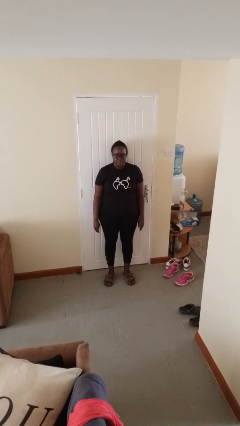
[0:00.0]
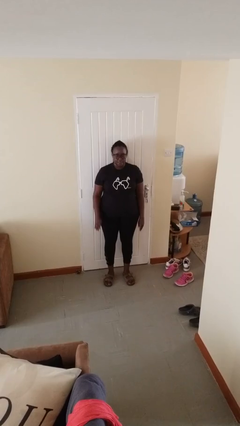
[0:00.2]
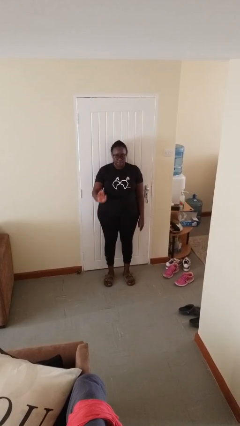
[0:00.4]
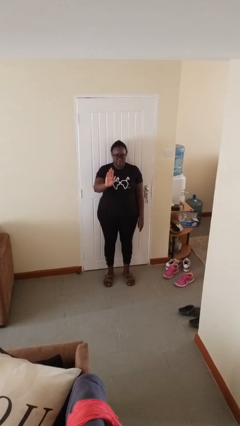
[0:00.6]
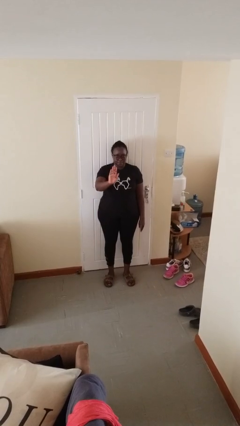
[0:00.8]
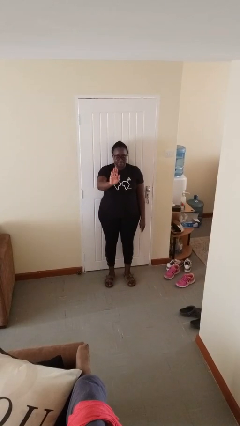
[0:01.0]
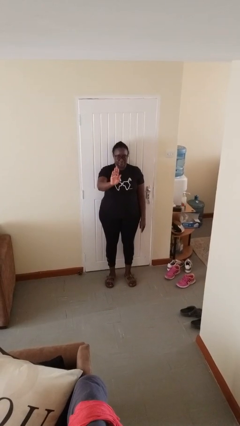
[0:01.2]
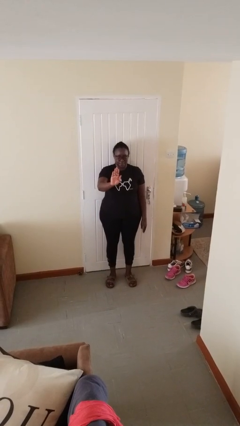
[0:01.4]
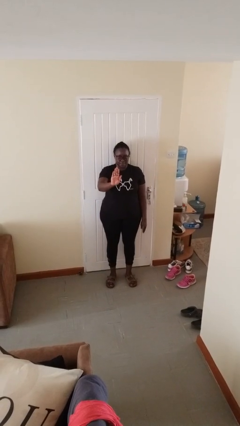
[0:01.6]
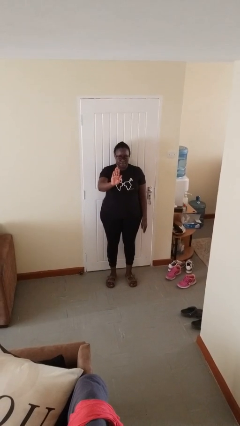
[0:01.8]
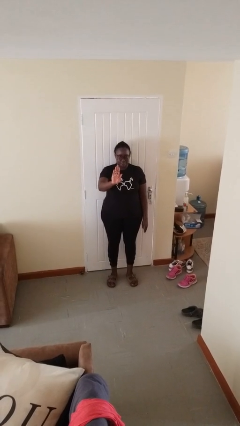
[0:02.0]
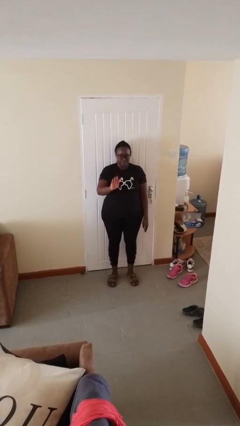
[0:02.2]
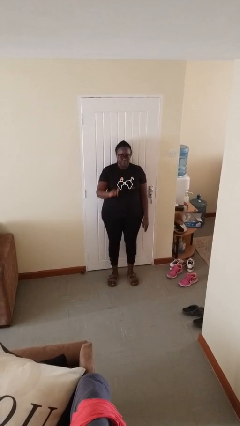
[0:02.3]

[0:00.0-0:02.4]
person gestures stop

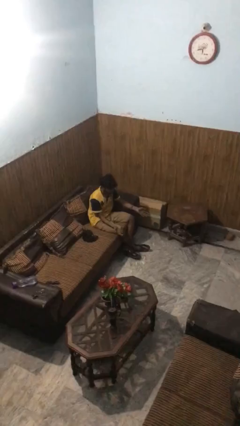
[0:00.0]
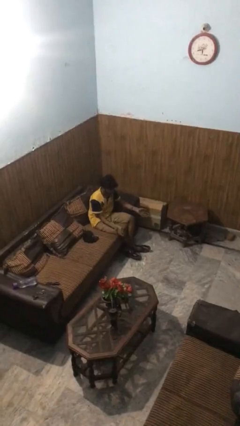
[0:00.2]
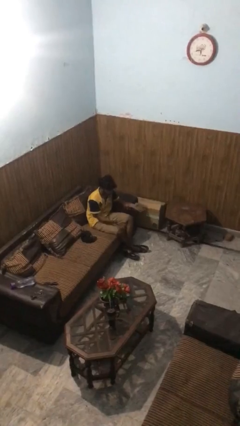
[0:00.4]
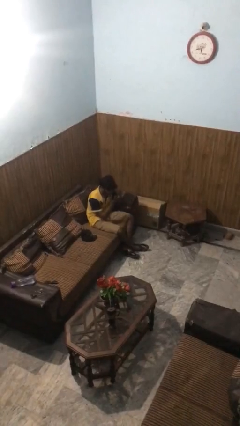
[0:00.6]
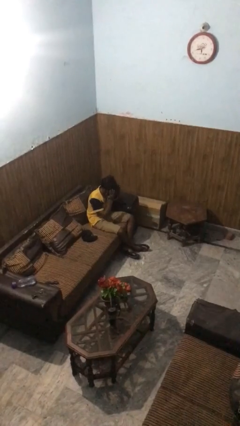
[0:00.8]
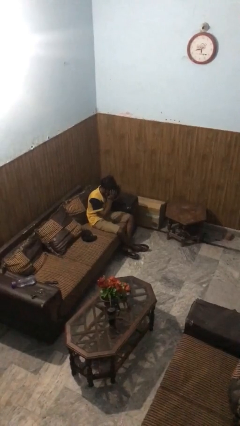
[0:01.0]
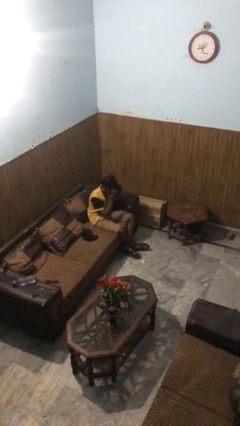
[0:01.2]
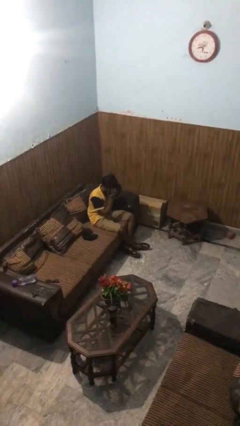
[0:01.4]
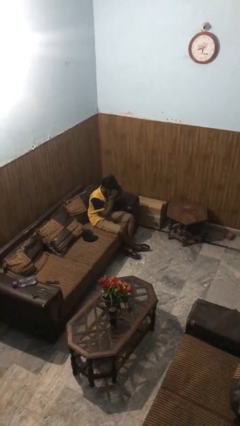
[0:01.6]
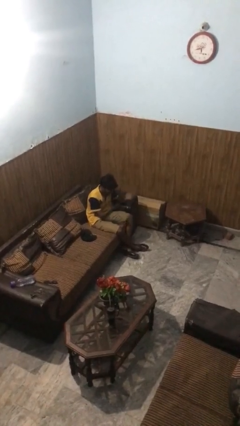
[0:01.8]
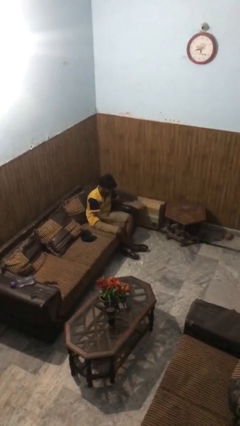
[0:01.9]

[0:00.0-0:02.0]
person covers face with hands

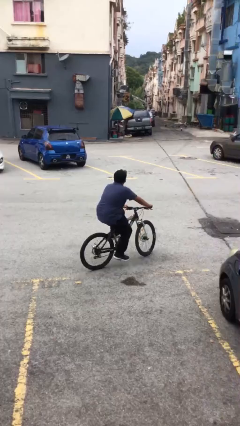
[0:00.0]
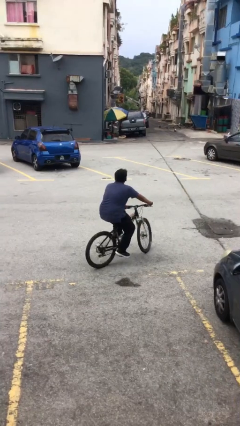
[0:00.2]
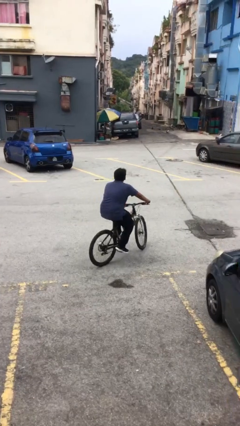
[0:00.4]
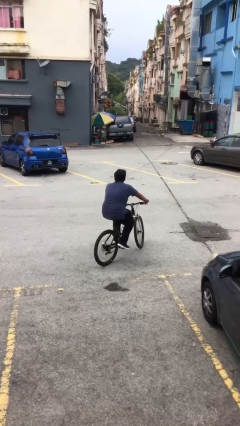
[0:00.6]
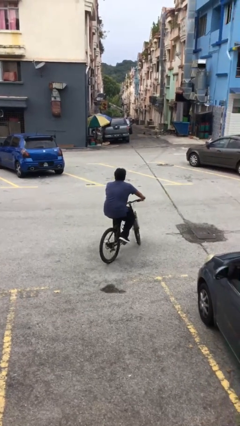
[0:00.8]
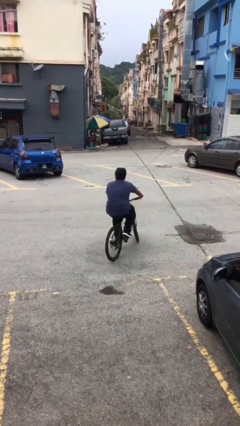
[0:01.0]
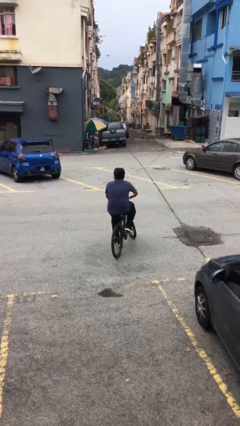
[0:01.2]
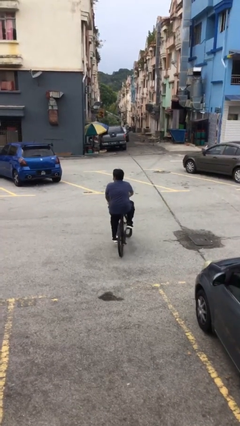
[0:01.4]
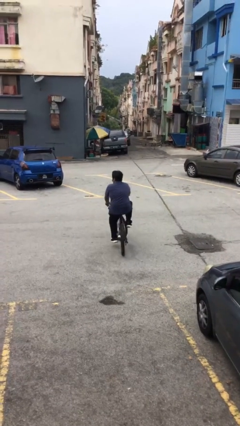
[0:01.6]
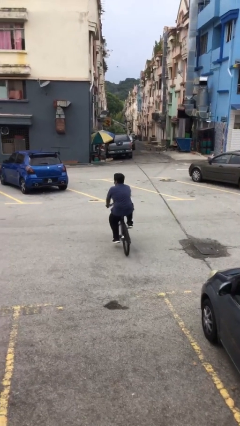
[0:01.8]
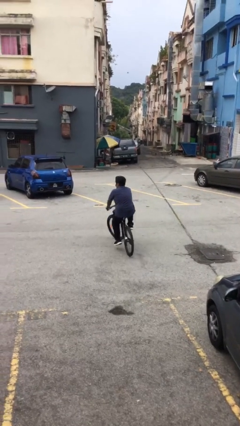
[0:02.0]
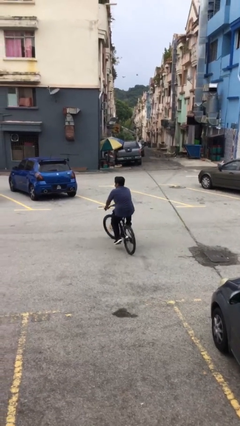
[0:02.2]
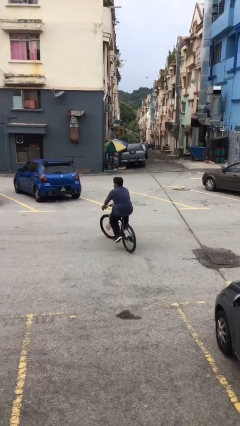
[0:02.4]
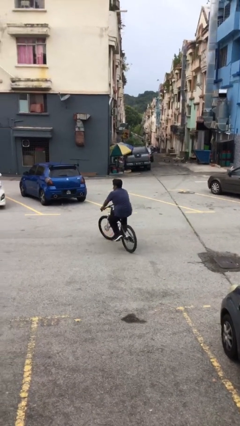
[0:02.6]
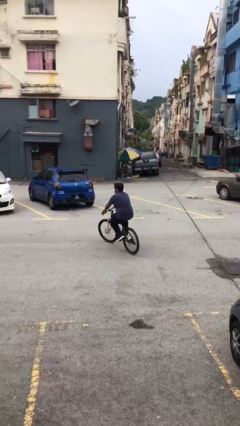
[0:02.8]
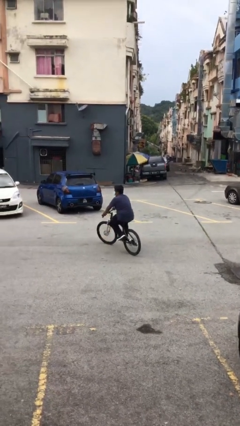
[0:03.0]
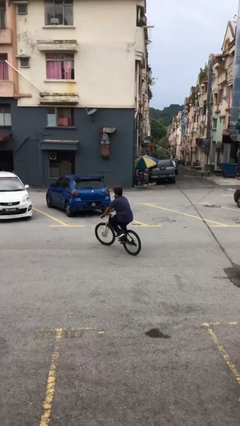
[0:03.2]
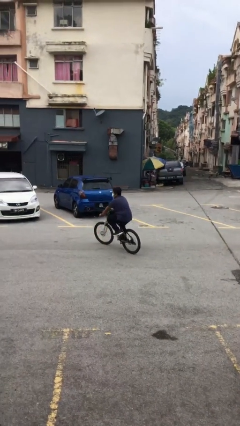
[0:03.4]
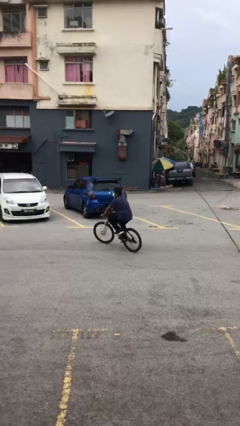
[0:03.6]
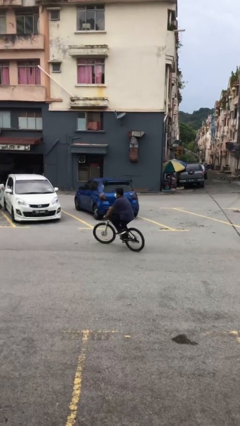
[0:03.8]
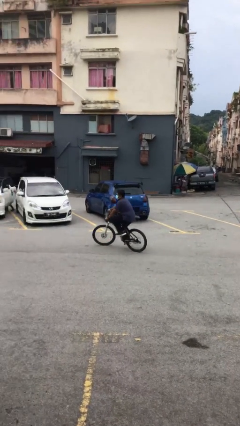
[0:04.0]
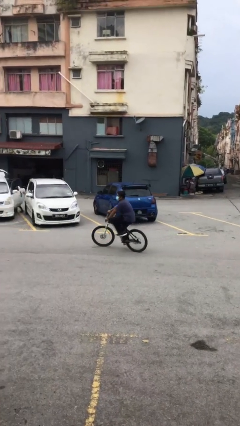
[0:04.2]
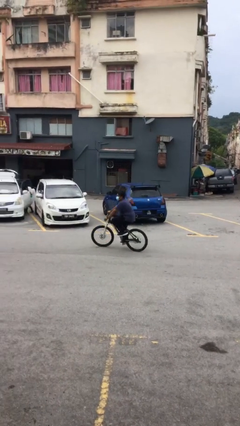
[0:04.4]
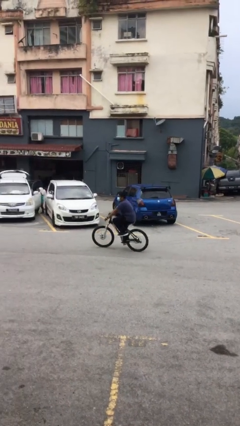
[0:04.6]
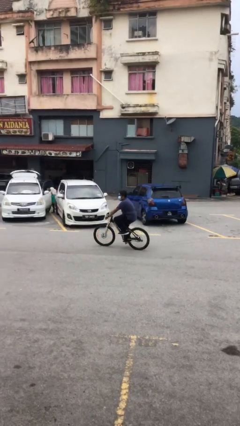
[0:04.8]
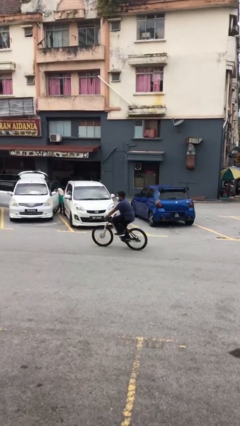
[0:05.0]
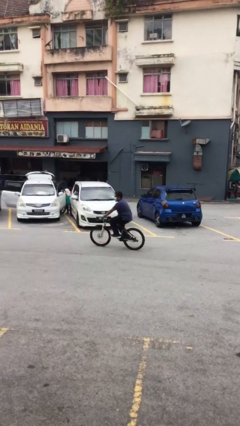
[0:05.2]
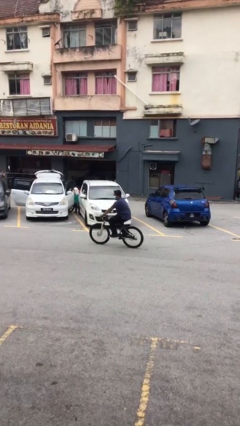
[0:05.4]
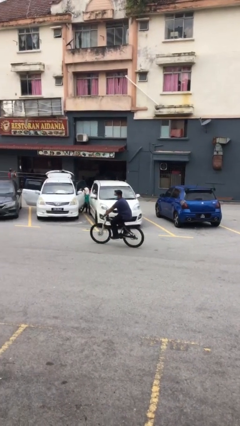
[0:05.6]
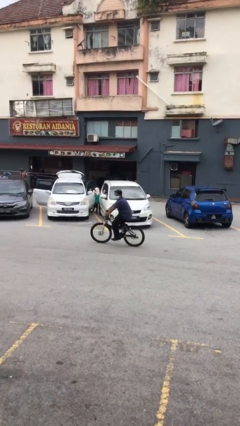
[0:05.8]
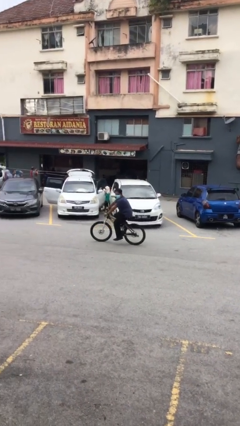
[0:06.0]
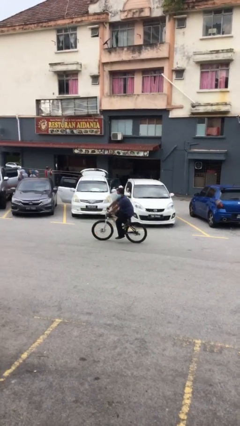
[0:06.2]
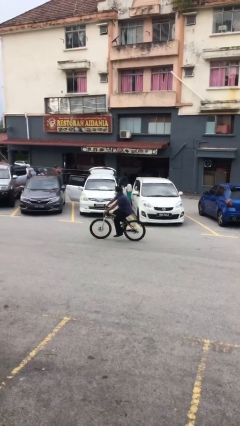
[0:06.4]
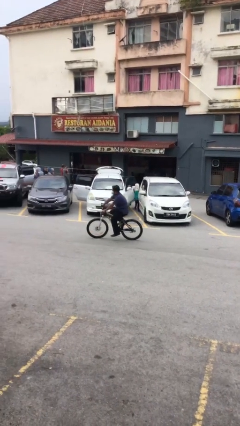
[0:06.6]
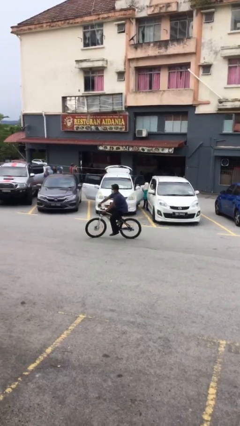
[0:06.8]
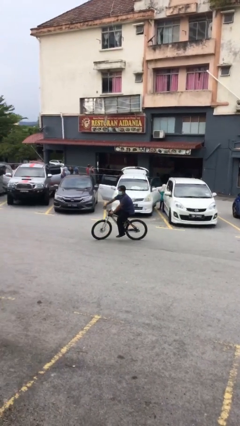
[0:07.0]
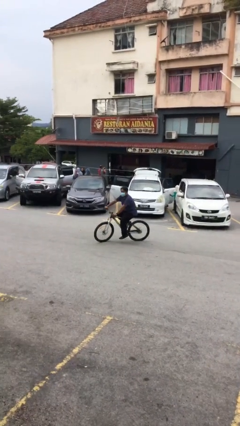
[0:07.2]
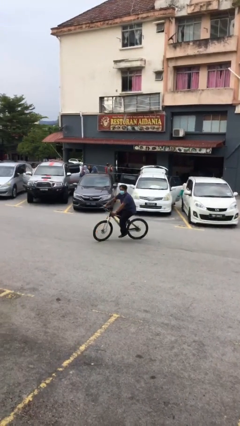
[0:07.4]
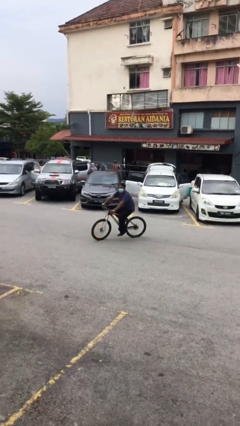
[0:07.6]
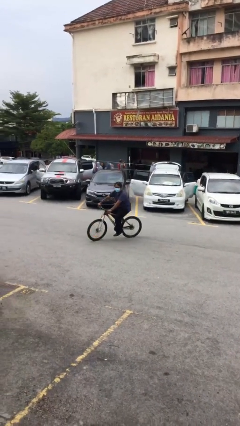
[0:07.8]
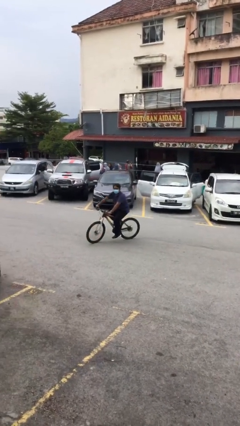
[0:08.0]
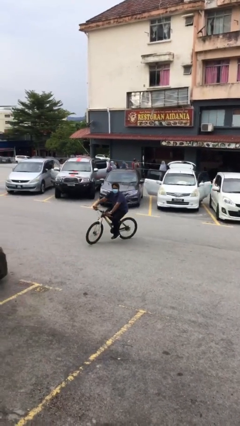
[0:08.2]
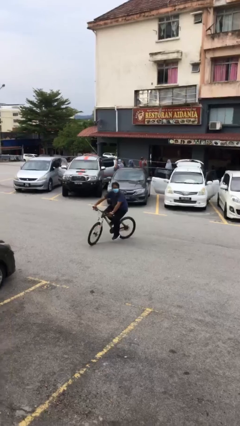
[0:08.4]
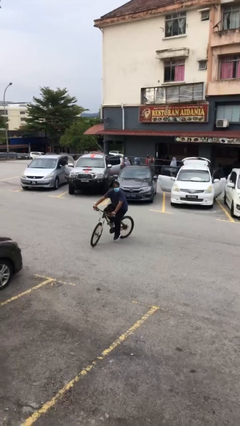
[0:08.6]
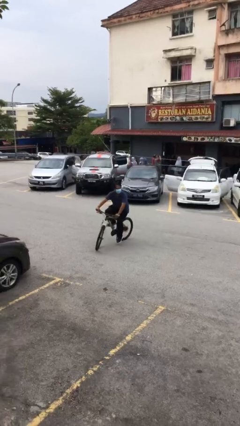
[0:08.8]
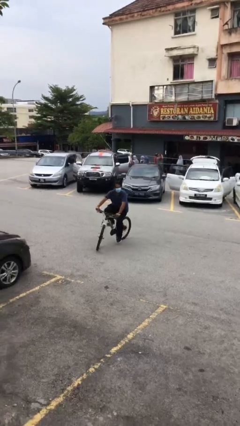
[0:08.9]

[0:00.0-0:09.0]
person rides bicycle

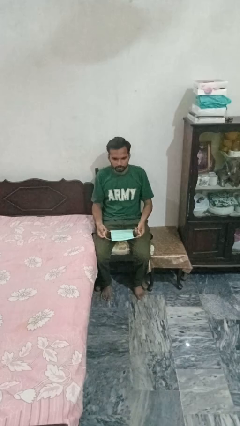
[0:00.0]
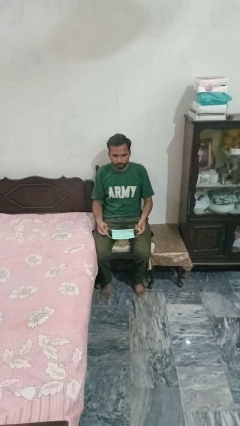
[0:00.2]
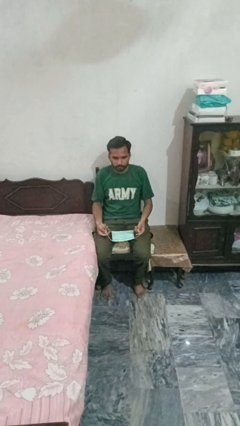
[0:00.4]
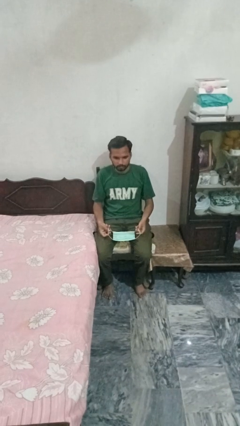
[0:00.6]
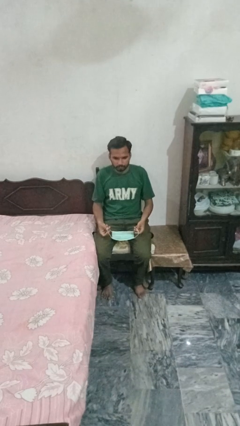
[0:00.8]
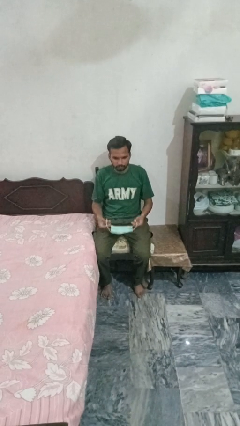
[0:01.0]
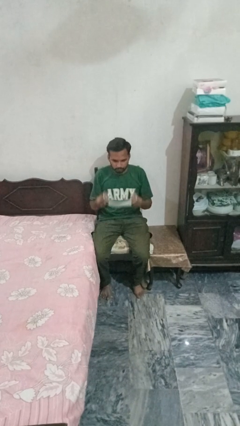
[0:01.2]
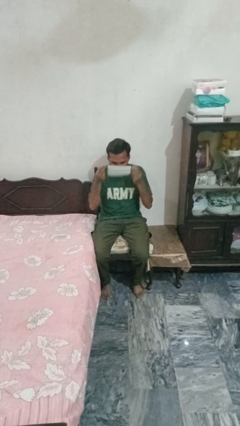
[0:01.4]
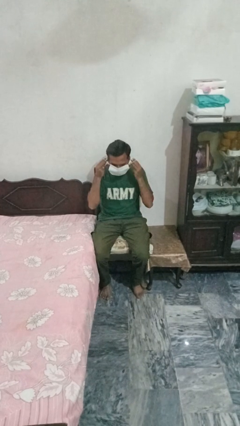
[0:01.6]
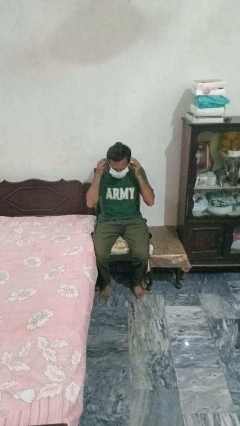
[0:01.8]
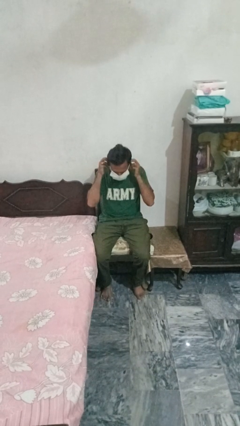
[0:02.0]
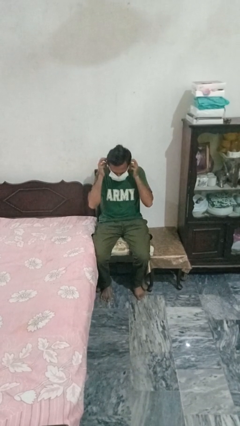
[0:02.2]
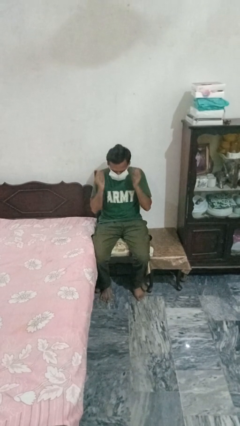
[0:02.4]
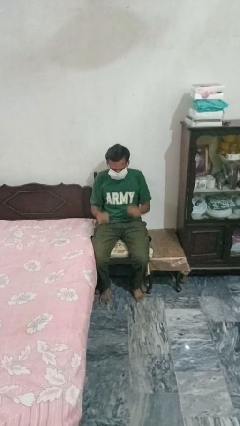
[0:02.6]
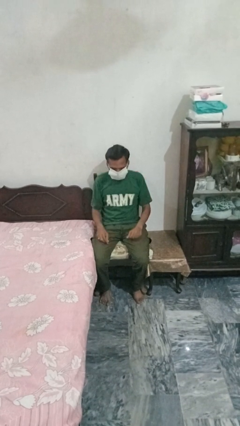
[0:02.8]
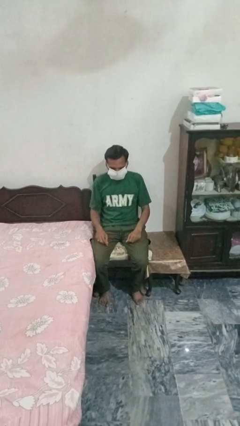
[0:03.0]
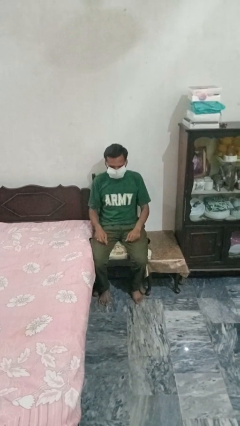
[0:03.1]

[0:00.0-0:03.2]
person puts on facemask

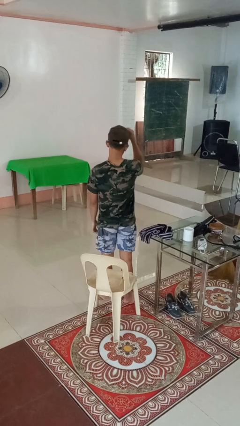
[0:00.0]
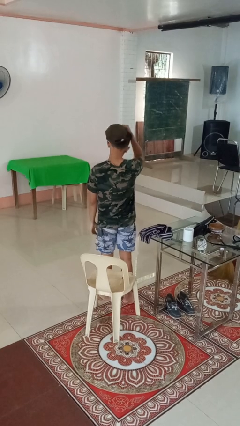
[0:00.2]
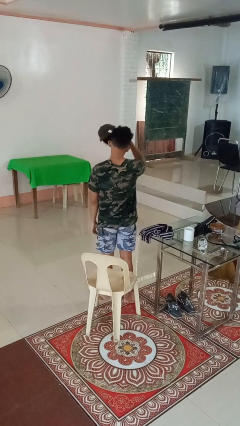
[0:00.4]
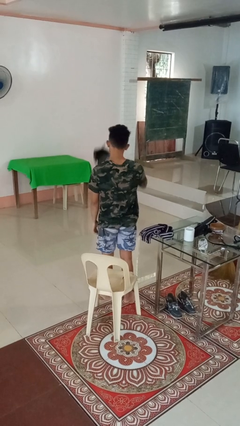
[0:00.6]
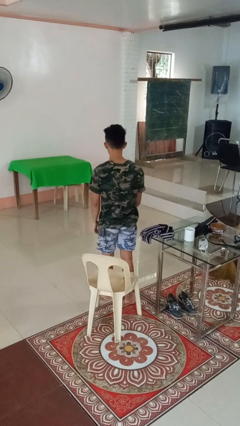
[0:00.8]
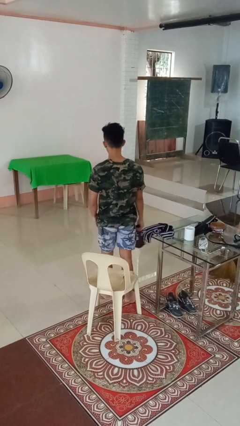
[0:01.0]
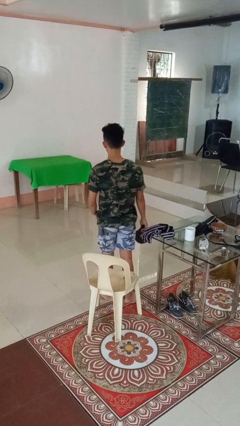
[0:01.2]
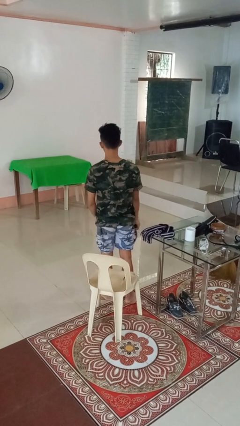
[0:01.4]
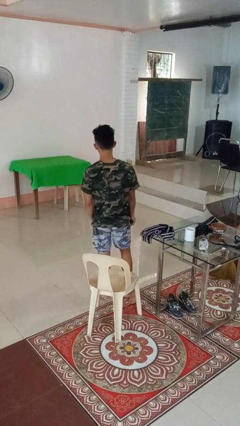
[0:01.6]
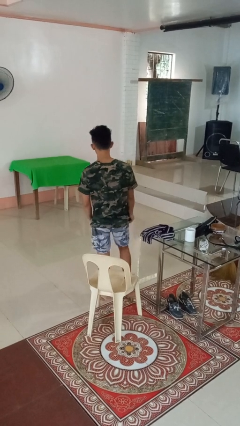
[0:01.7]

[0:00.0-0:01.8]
person takes off hat
